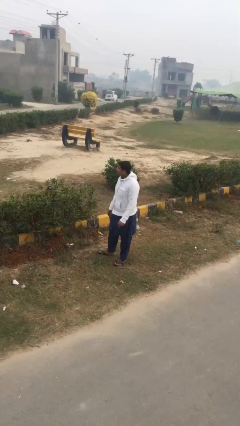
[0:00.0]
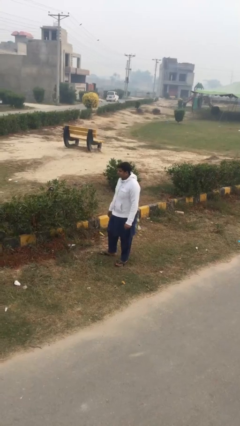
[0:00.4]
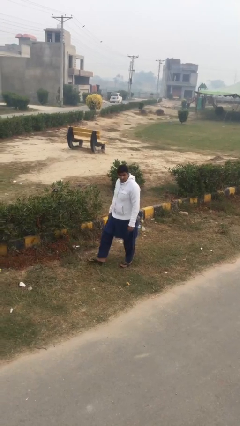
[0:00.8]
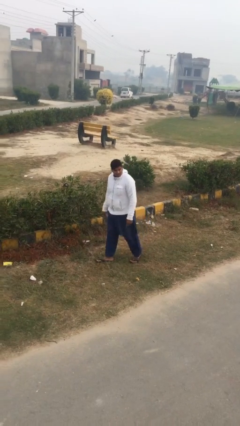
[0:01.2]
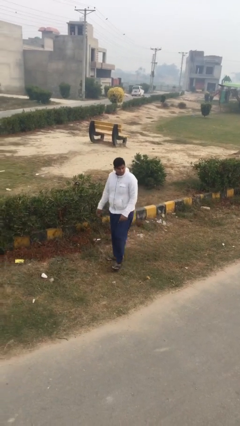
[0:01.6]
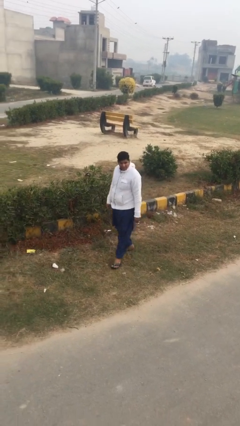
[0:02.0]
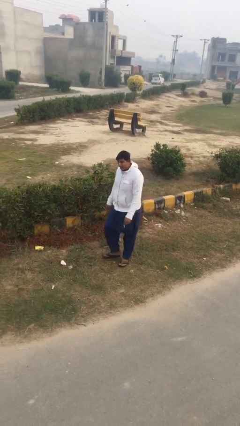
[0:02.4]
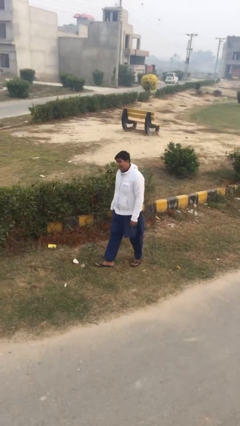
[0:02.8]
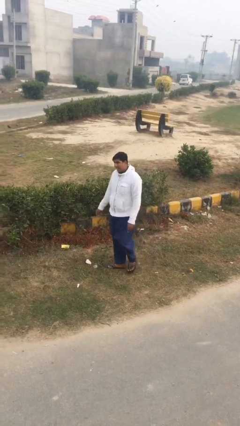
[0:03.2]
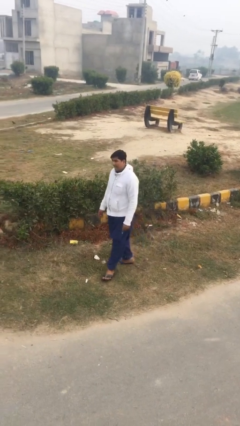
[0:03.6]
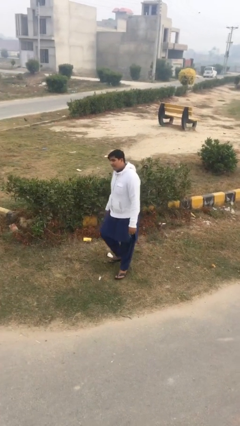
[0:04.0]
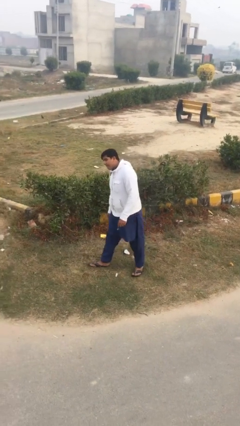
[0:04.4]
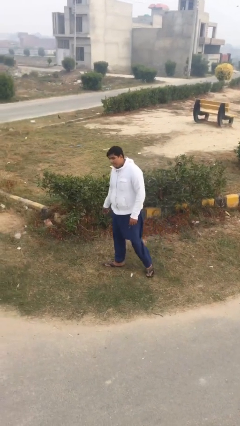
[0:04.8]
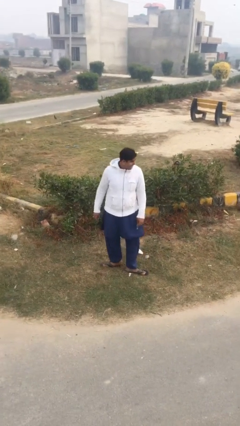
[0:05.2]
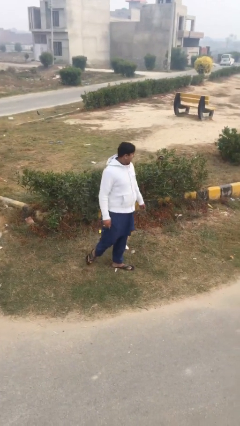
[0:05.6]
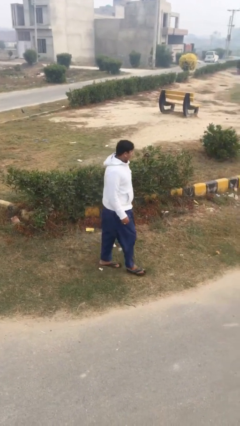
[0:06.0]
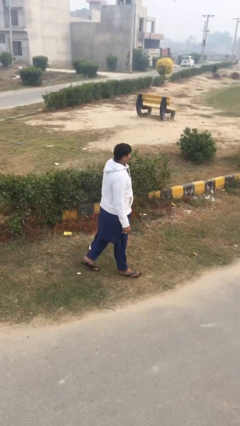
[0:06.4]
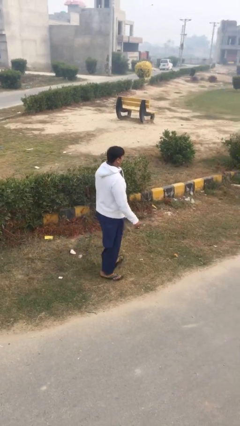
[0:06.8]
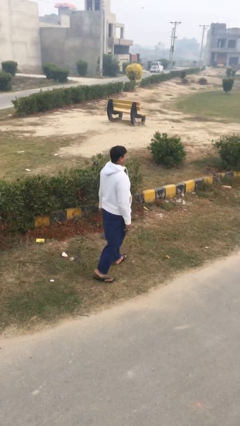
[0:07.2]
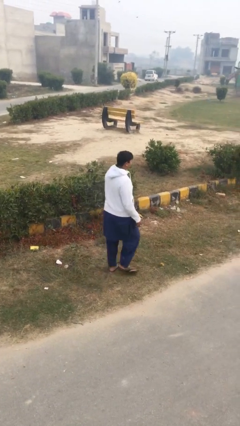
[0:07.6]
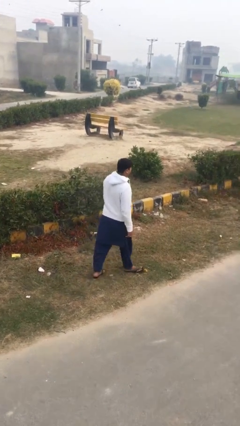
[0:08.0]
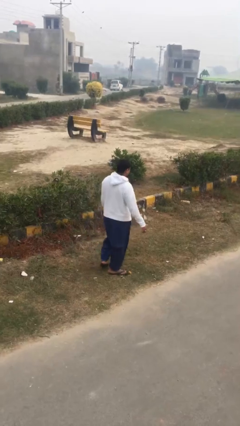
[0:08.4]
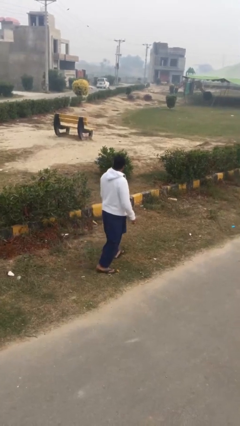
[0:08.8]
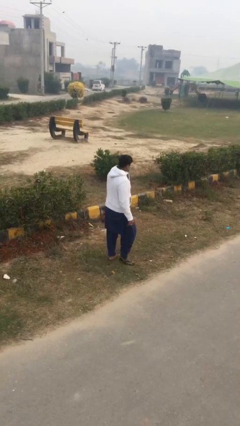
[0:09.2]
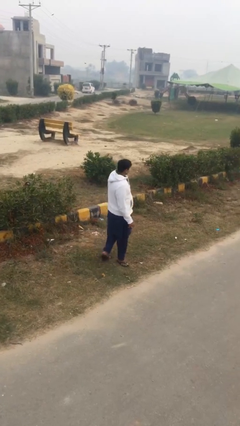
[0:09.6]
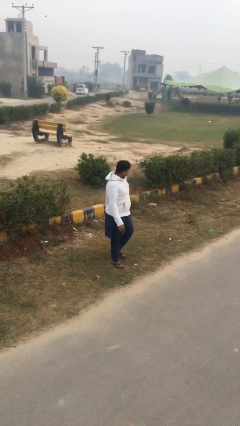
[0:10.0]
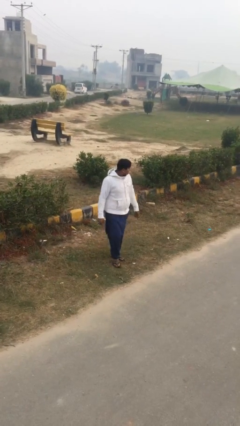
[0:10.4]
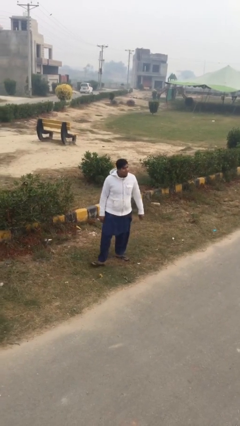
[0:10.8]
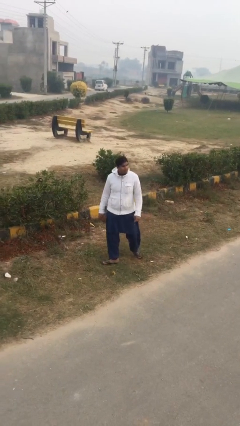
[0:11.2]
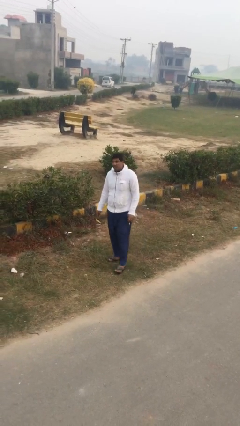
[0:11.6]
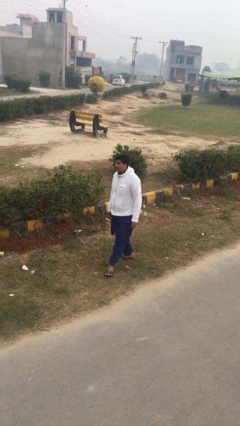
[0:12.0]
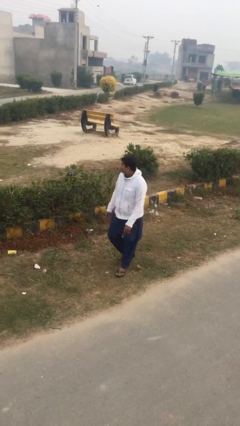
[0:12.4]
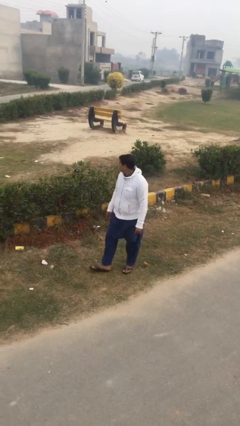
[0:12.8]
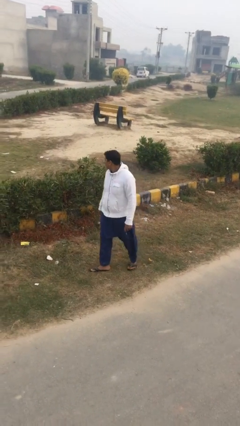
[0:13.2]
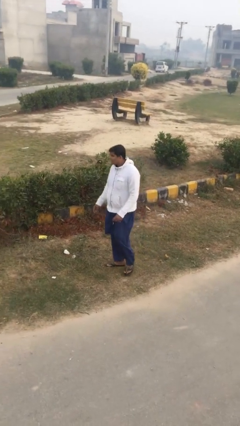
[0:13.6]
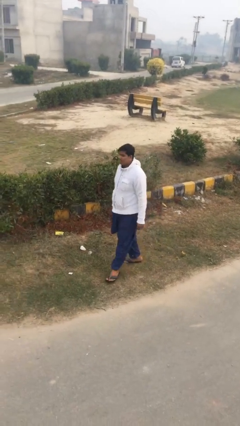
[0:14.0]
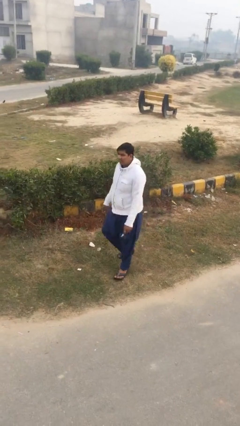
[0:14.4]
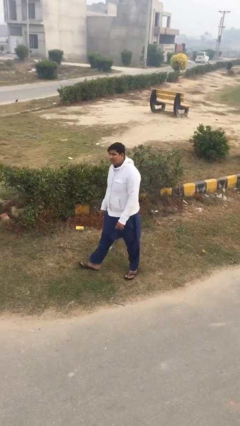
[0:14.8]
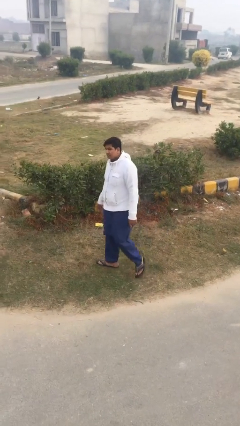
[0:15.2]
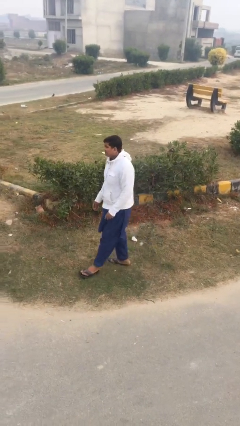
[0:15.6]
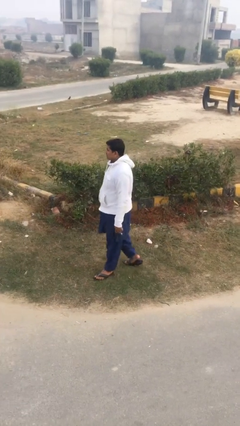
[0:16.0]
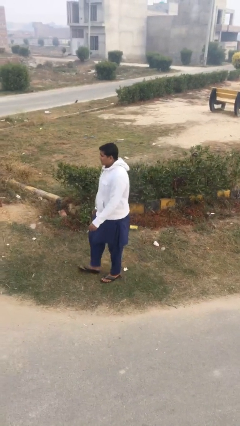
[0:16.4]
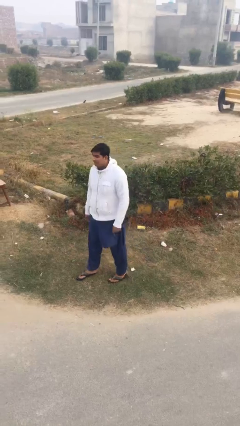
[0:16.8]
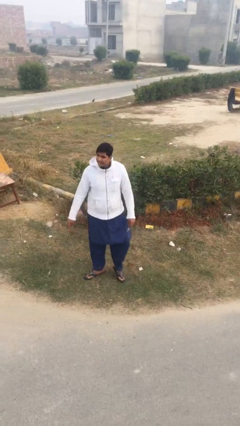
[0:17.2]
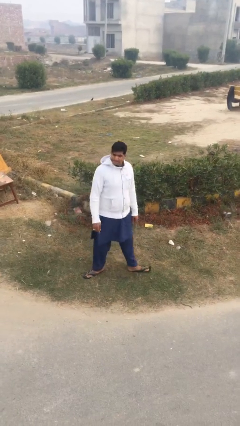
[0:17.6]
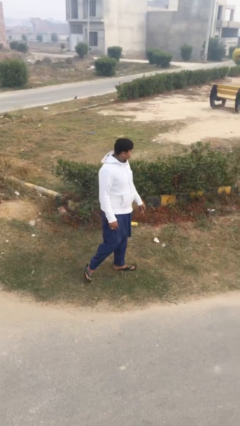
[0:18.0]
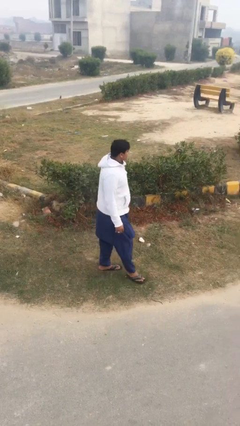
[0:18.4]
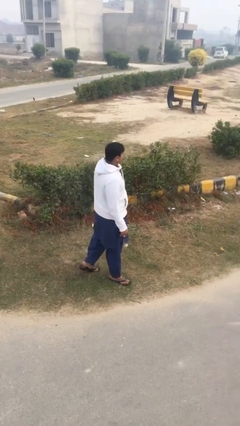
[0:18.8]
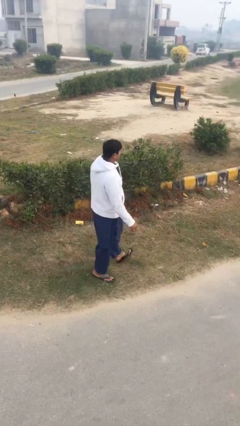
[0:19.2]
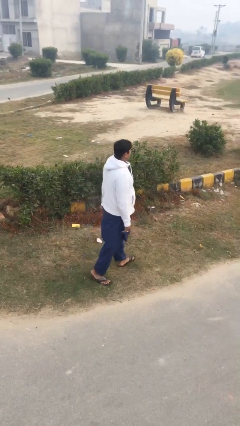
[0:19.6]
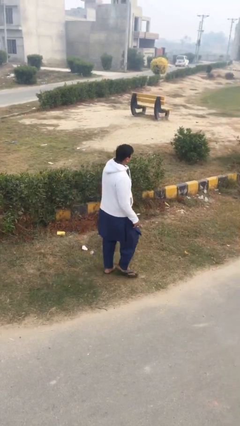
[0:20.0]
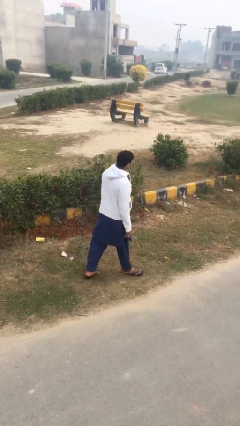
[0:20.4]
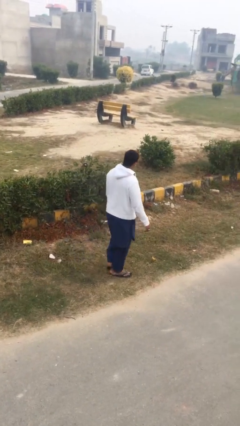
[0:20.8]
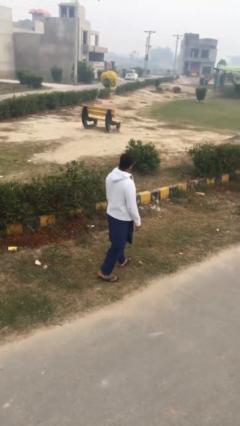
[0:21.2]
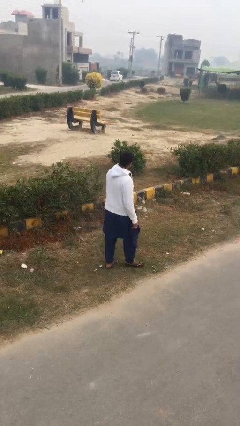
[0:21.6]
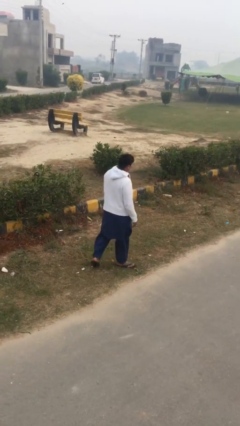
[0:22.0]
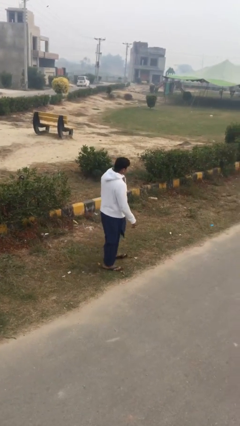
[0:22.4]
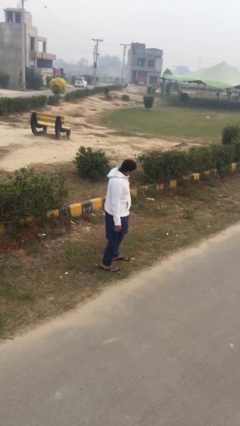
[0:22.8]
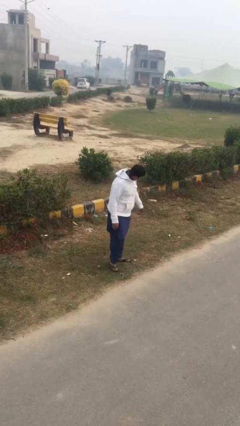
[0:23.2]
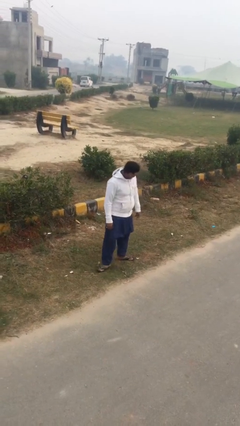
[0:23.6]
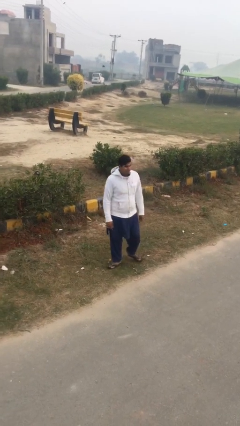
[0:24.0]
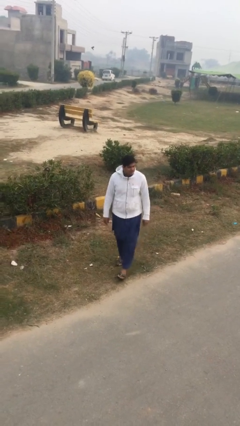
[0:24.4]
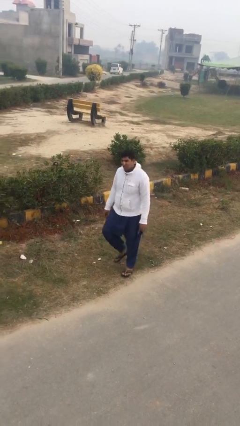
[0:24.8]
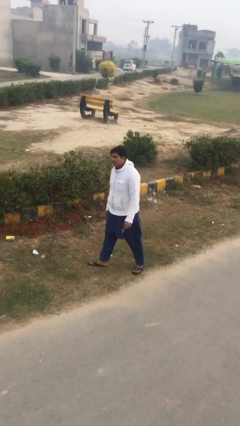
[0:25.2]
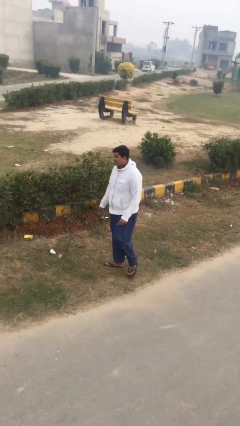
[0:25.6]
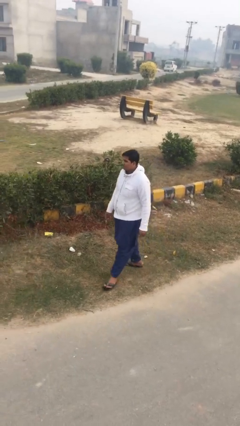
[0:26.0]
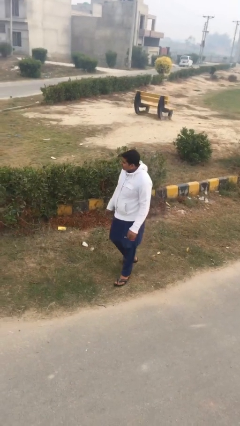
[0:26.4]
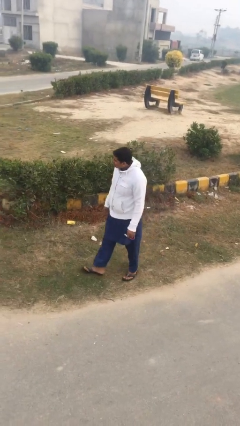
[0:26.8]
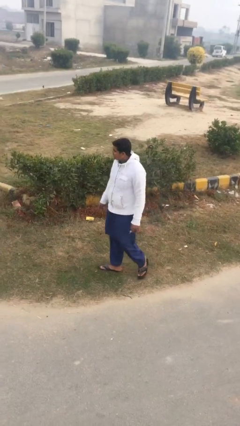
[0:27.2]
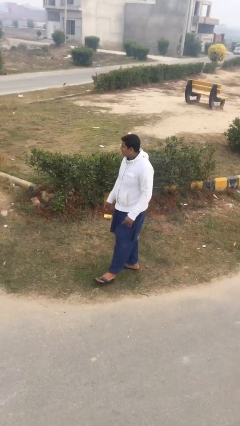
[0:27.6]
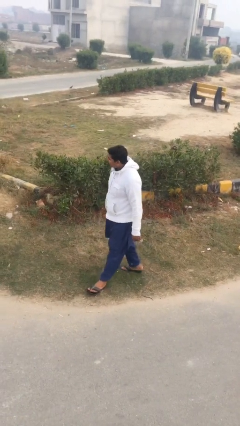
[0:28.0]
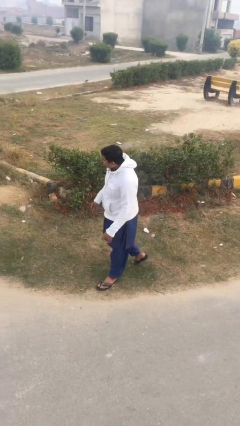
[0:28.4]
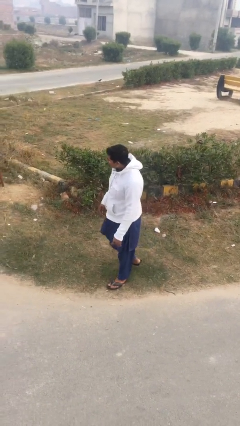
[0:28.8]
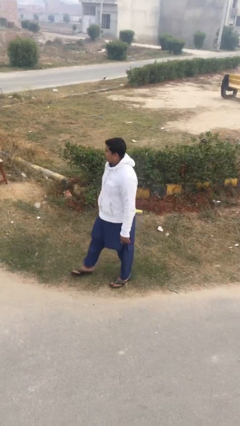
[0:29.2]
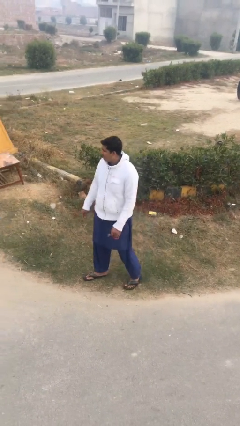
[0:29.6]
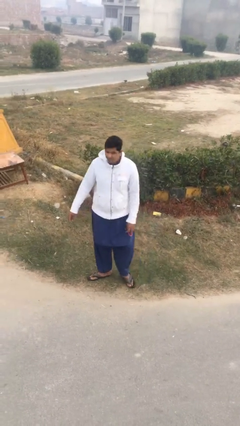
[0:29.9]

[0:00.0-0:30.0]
person walks

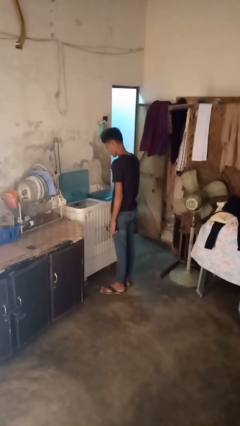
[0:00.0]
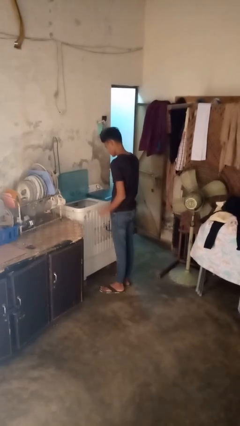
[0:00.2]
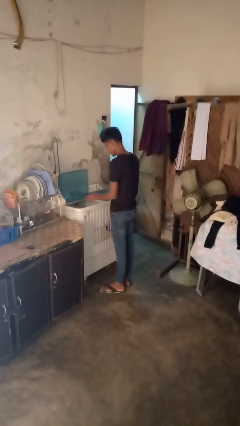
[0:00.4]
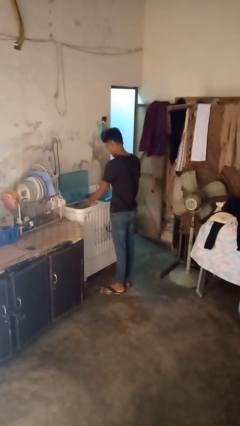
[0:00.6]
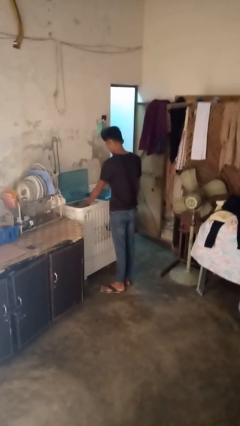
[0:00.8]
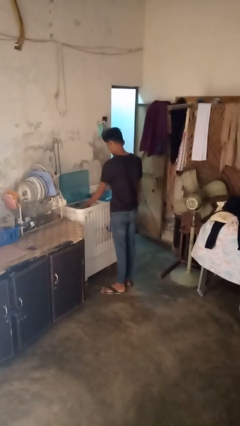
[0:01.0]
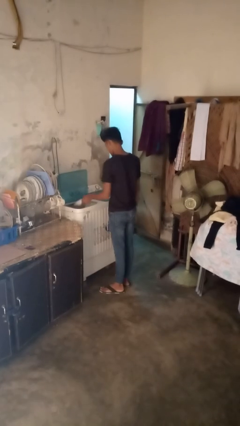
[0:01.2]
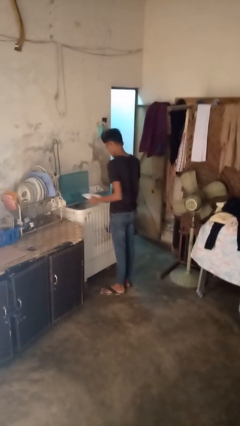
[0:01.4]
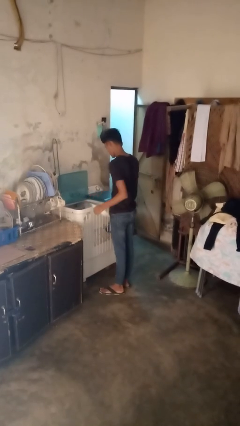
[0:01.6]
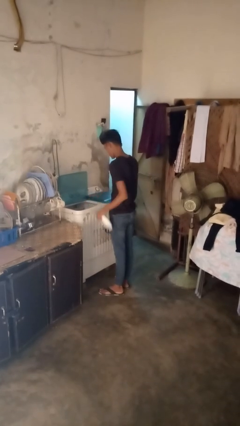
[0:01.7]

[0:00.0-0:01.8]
person unloads dishwasher

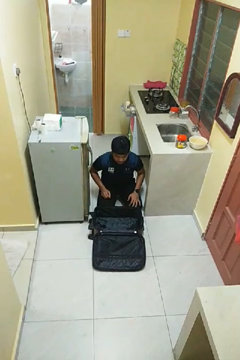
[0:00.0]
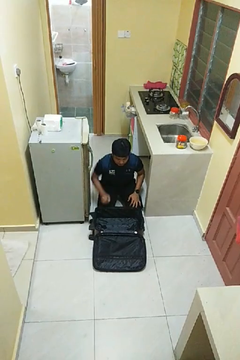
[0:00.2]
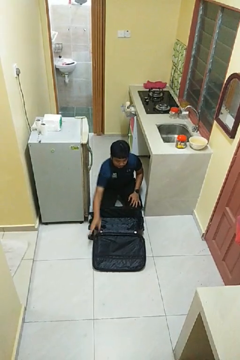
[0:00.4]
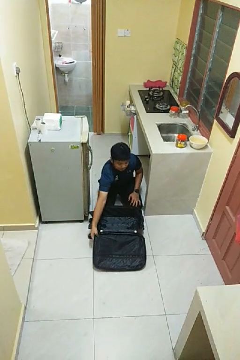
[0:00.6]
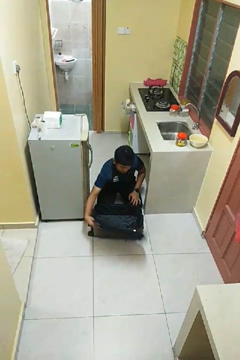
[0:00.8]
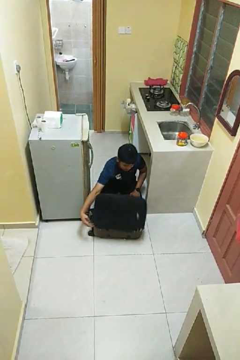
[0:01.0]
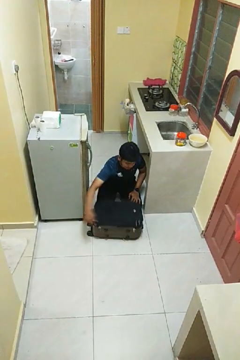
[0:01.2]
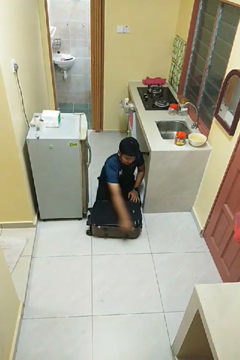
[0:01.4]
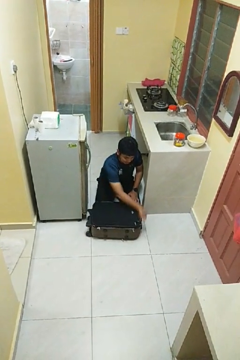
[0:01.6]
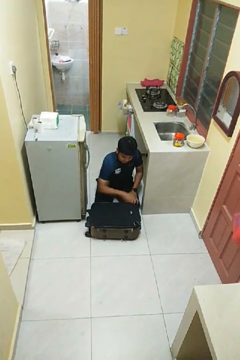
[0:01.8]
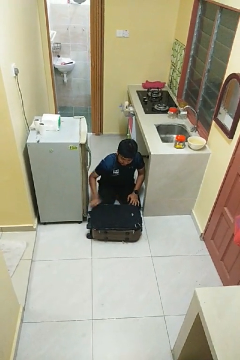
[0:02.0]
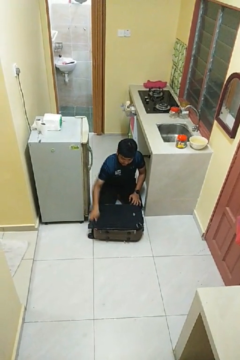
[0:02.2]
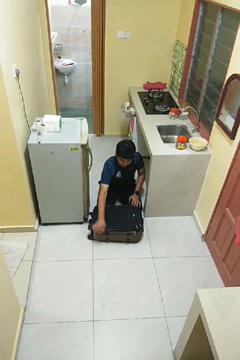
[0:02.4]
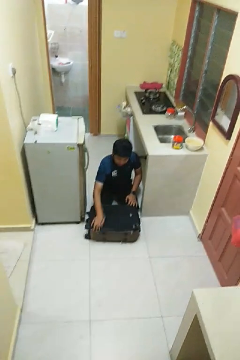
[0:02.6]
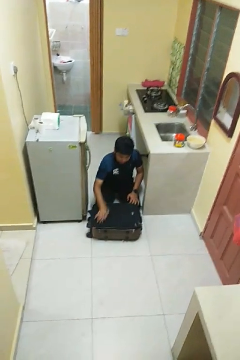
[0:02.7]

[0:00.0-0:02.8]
person closes suitcase
